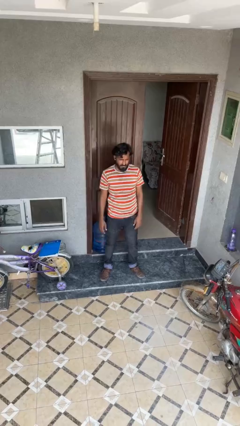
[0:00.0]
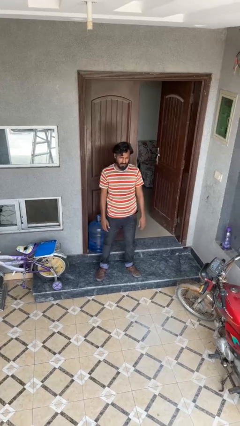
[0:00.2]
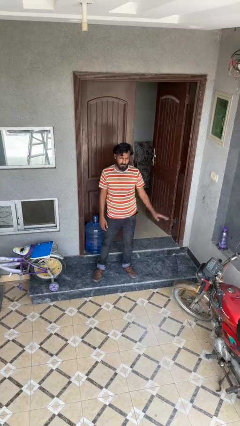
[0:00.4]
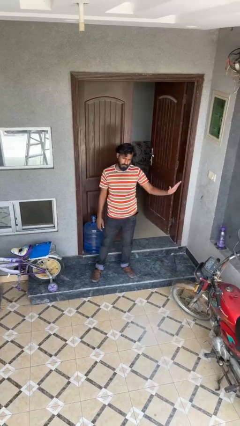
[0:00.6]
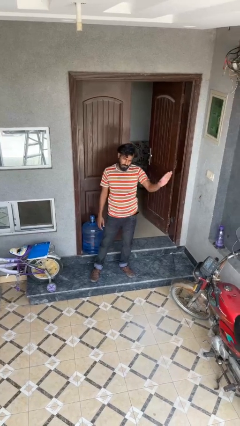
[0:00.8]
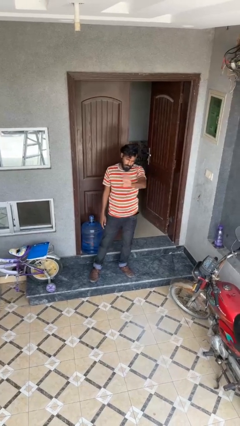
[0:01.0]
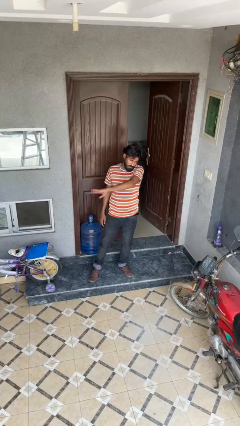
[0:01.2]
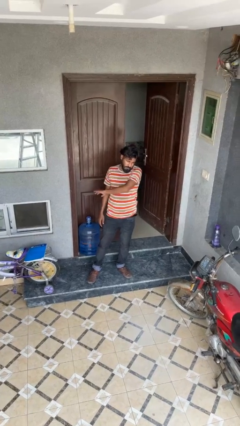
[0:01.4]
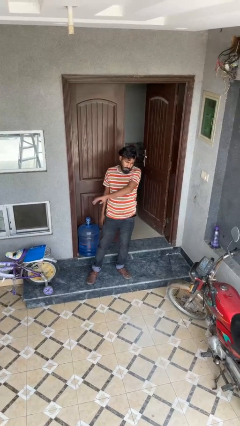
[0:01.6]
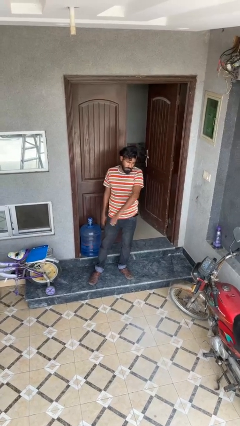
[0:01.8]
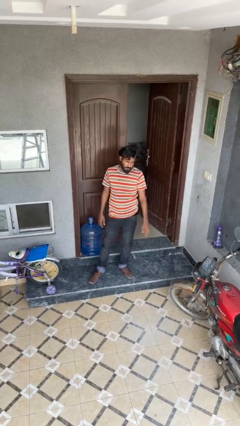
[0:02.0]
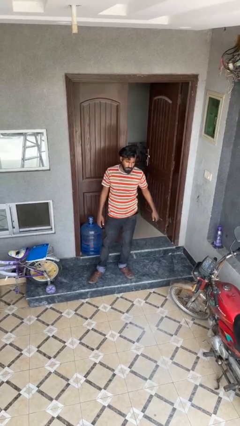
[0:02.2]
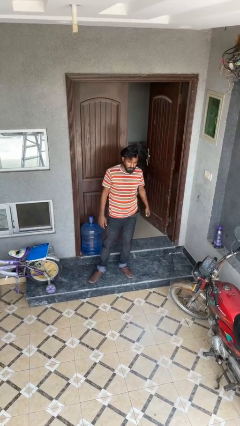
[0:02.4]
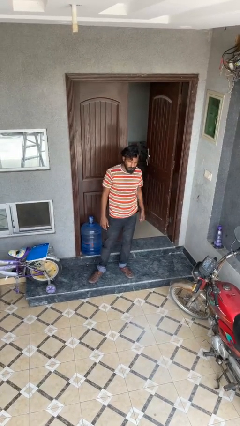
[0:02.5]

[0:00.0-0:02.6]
person gestures swipe right

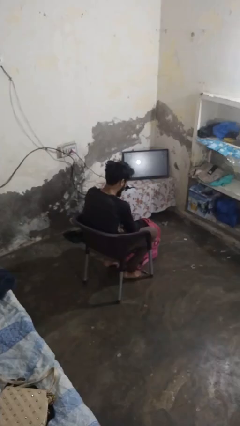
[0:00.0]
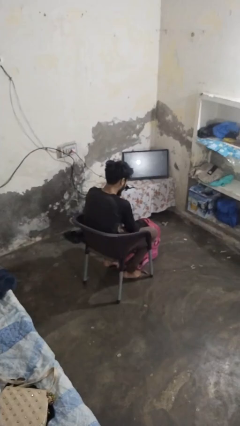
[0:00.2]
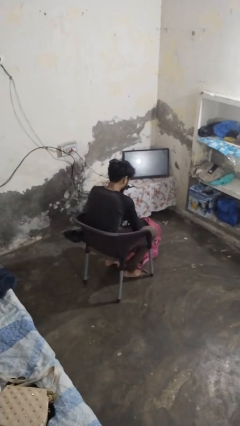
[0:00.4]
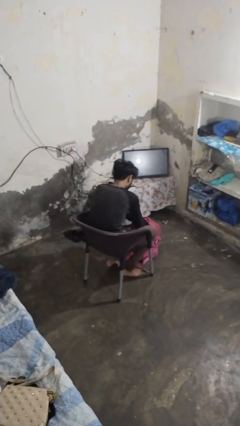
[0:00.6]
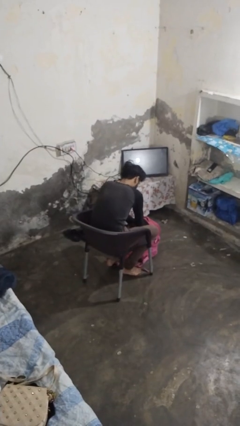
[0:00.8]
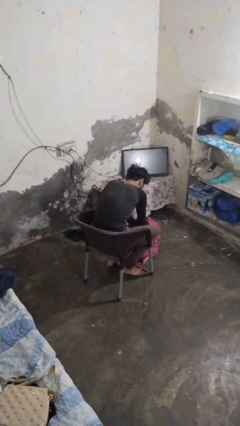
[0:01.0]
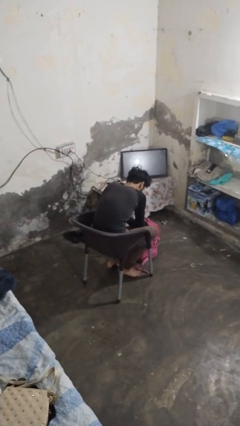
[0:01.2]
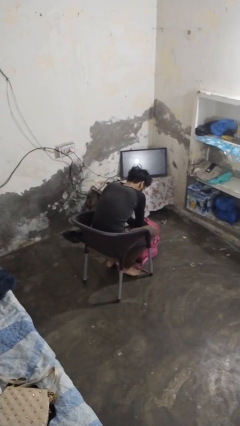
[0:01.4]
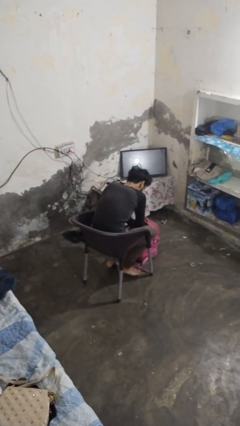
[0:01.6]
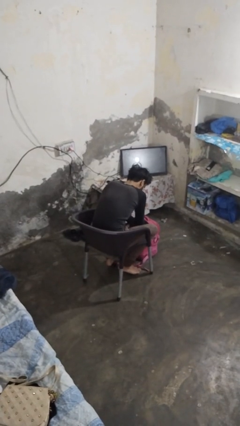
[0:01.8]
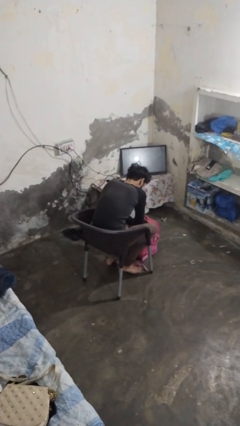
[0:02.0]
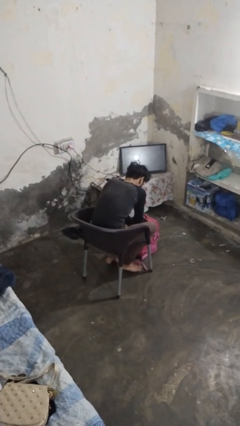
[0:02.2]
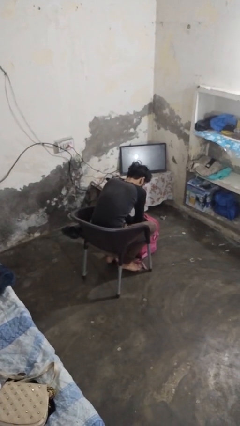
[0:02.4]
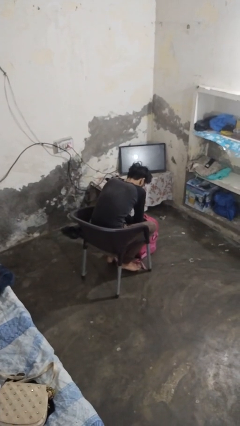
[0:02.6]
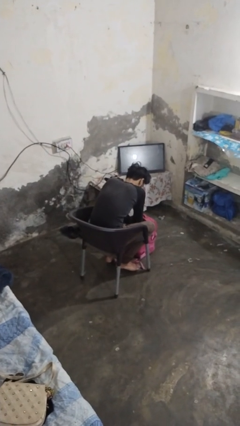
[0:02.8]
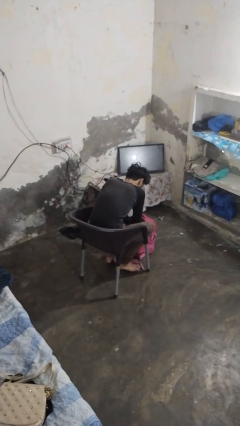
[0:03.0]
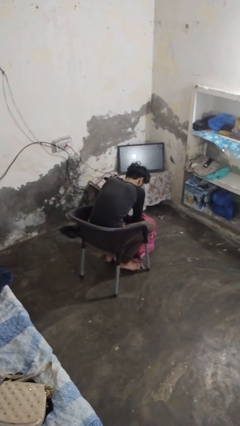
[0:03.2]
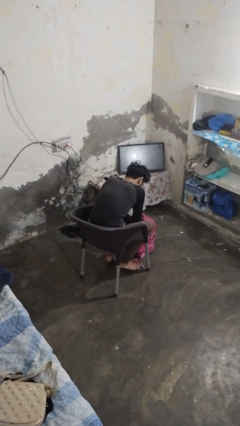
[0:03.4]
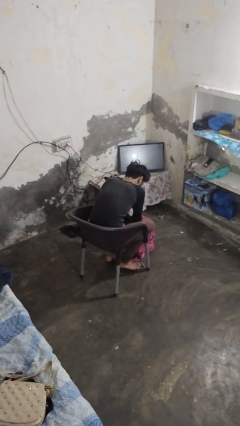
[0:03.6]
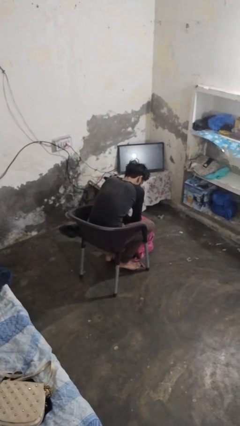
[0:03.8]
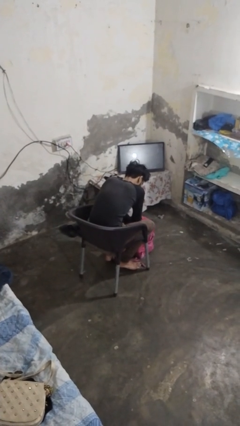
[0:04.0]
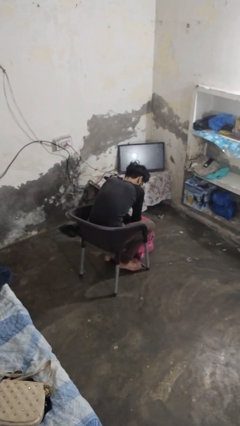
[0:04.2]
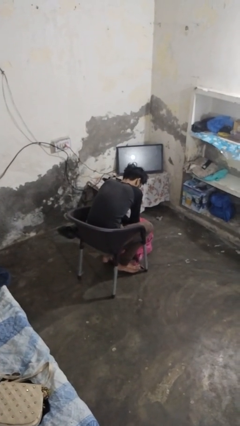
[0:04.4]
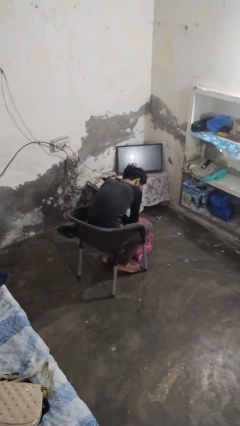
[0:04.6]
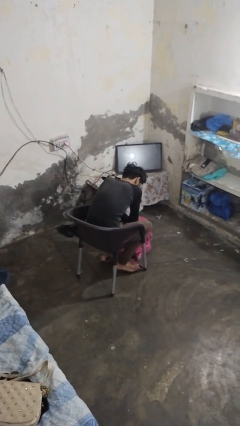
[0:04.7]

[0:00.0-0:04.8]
person searches in backpack

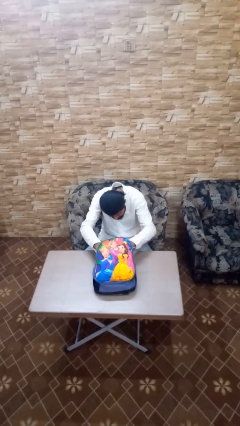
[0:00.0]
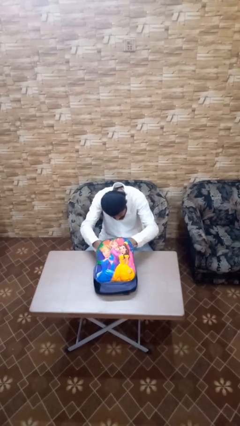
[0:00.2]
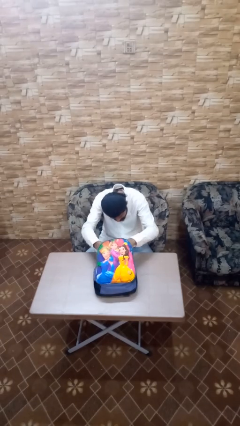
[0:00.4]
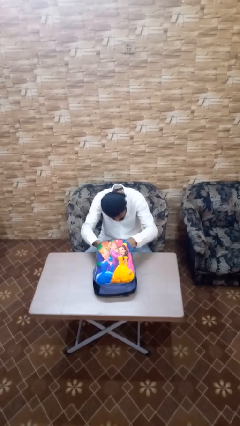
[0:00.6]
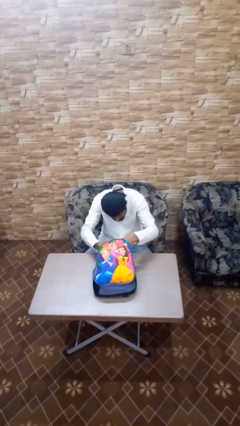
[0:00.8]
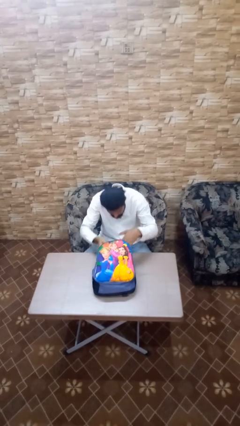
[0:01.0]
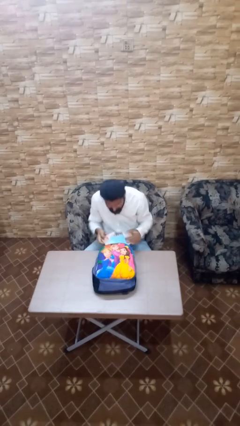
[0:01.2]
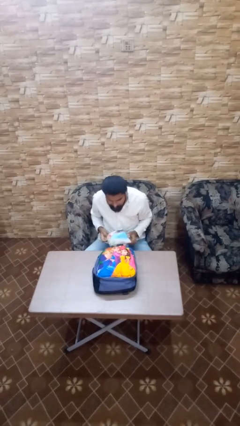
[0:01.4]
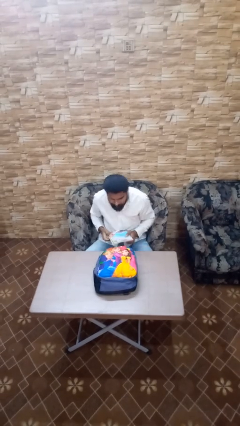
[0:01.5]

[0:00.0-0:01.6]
person takes object from backpack

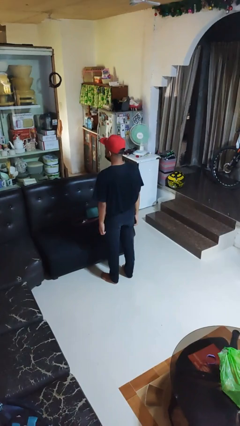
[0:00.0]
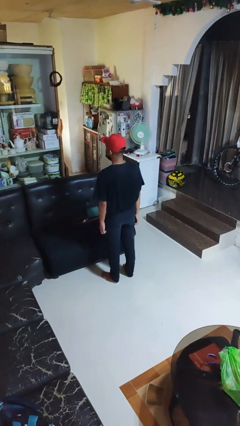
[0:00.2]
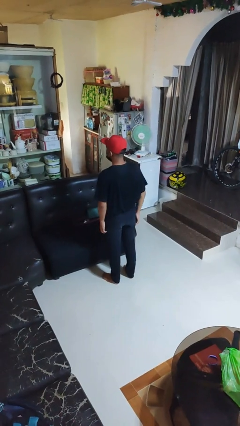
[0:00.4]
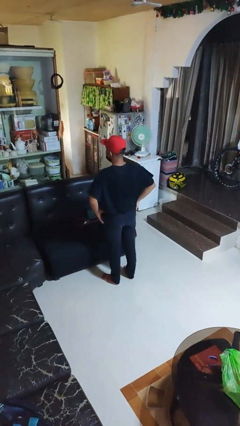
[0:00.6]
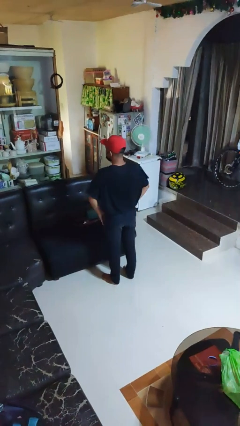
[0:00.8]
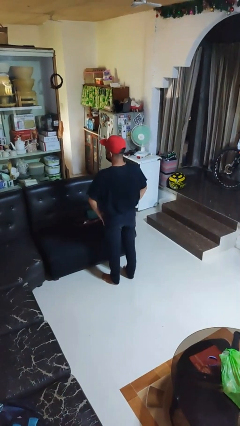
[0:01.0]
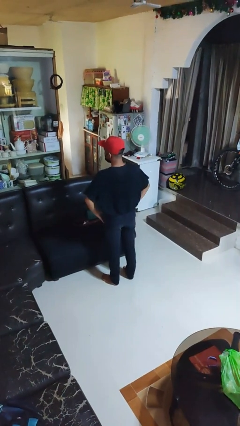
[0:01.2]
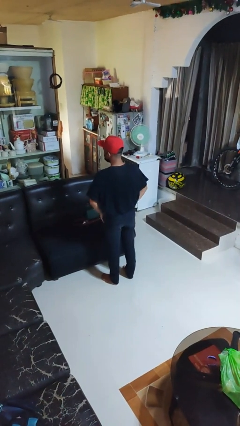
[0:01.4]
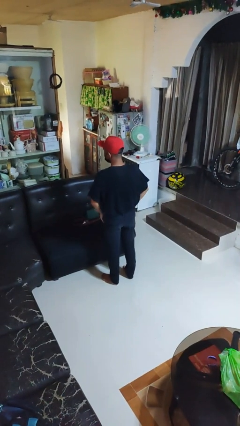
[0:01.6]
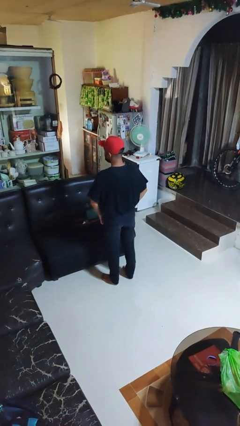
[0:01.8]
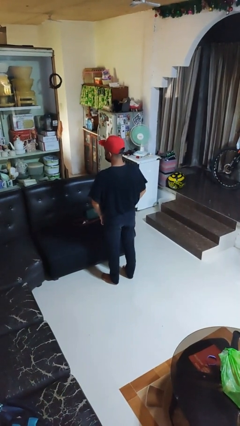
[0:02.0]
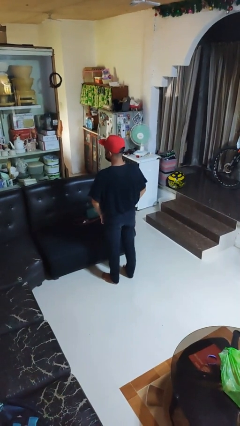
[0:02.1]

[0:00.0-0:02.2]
person puts hands in back pockets

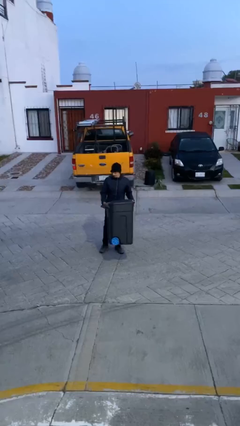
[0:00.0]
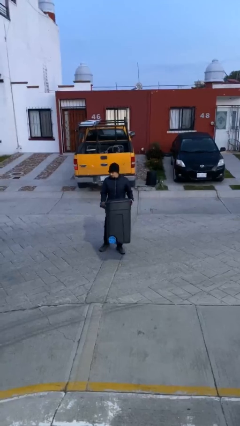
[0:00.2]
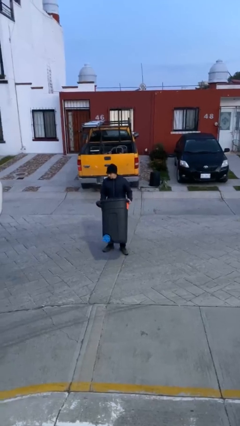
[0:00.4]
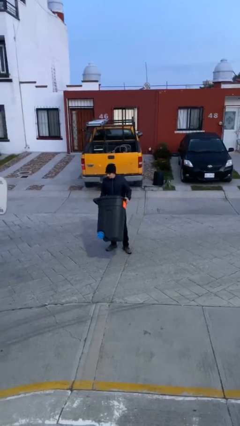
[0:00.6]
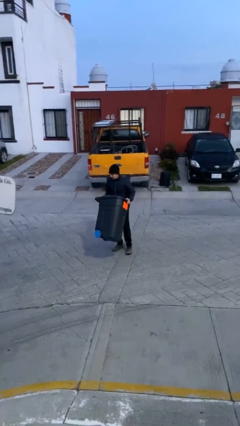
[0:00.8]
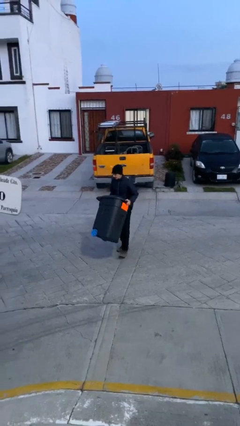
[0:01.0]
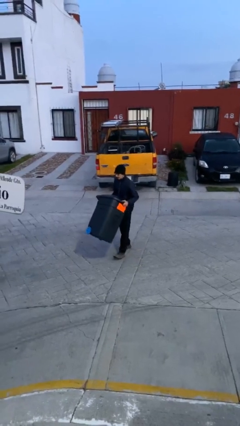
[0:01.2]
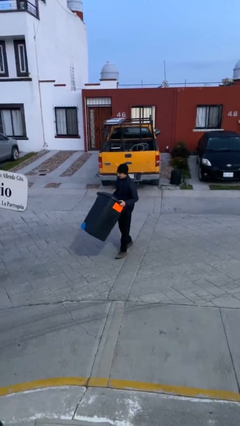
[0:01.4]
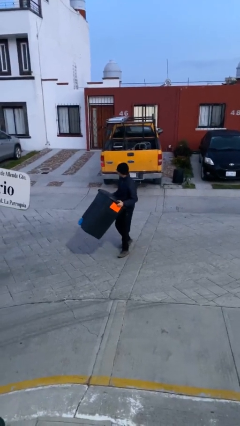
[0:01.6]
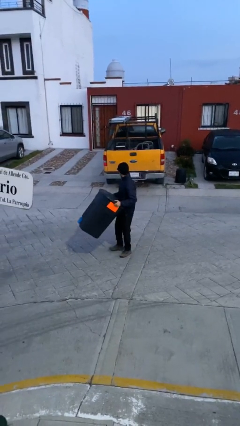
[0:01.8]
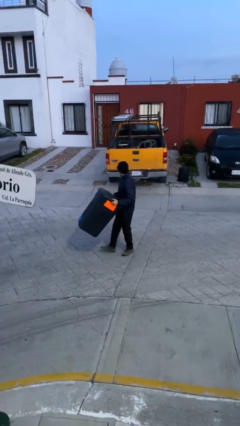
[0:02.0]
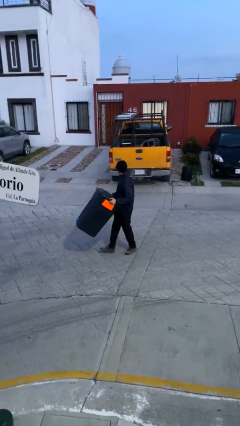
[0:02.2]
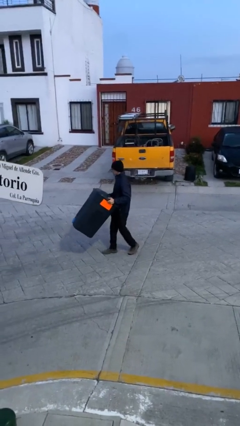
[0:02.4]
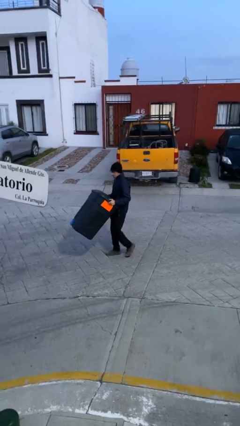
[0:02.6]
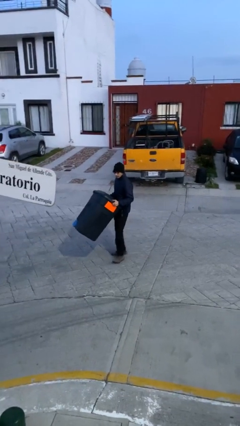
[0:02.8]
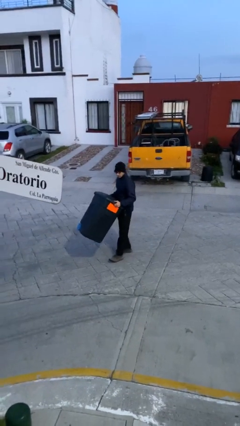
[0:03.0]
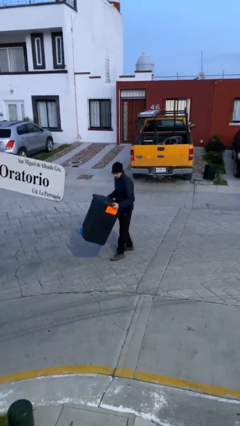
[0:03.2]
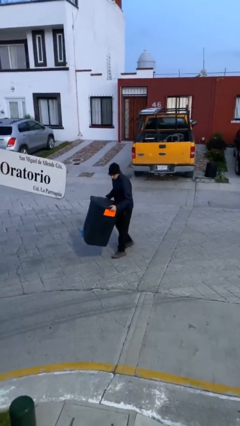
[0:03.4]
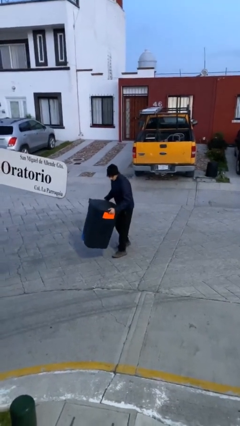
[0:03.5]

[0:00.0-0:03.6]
person carries heavy object

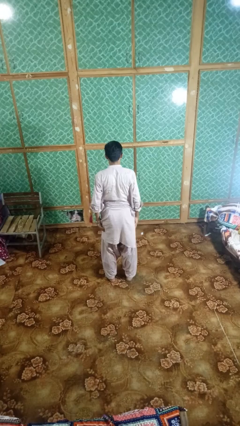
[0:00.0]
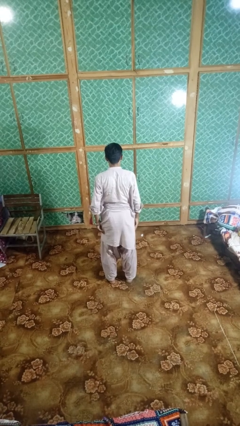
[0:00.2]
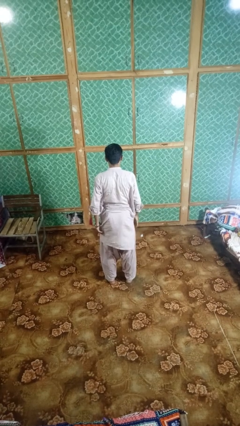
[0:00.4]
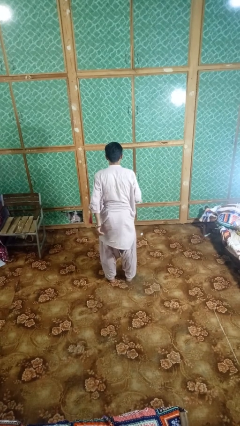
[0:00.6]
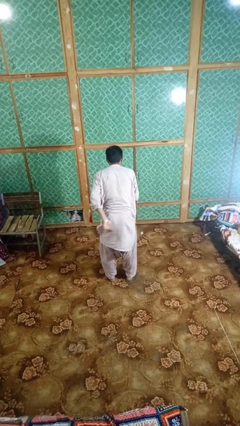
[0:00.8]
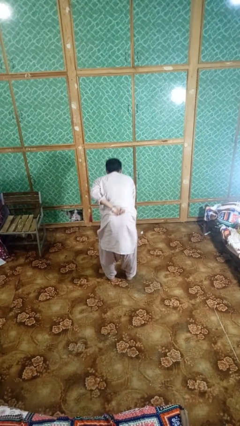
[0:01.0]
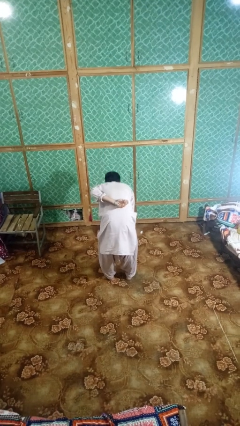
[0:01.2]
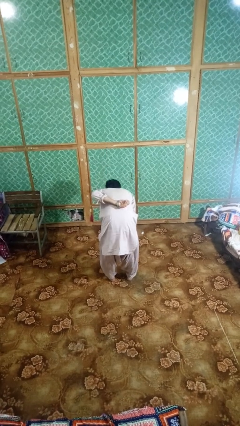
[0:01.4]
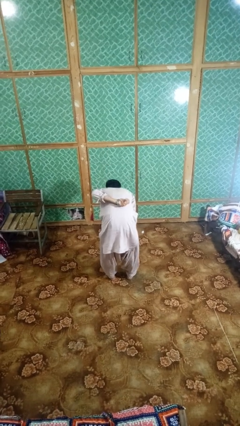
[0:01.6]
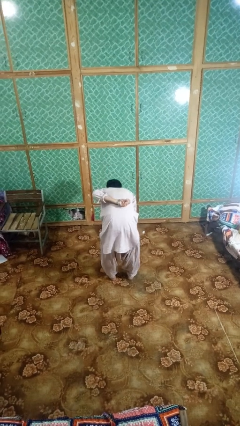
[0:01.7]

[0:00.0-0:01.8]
person bows

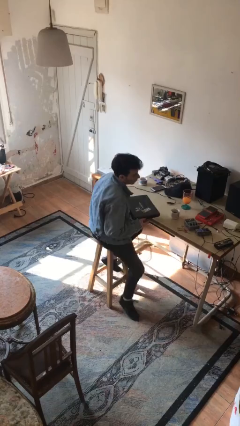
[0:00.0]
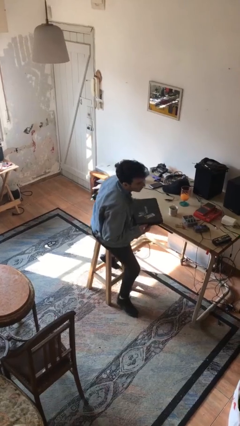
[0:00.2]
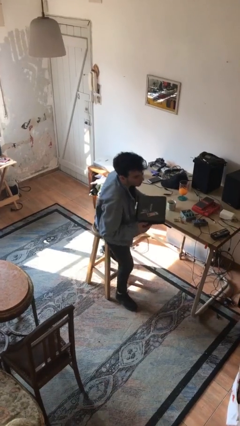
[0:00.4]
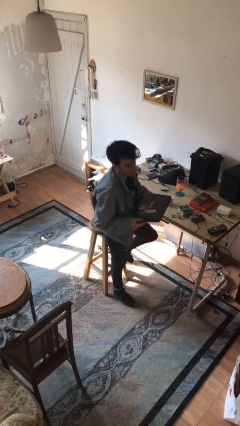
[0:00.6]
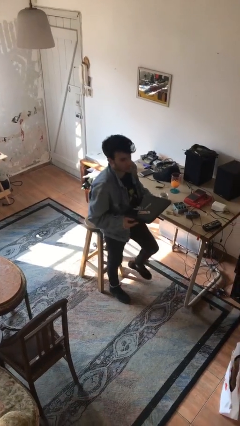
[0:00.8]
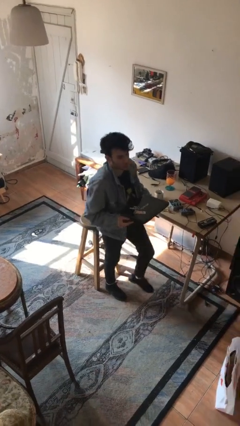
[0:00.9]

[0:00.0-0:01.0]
person stands up
